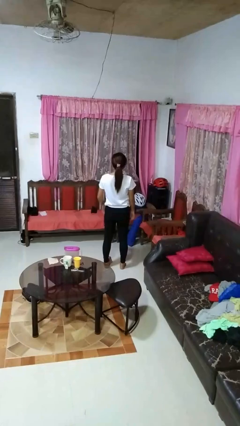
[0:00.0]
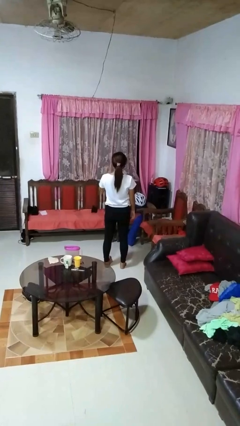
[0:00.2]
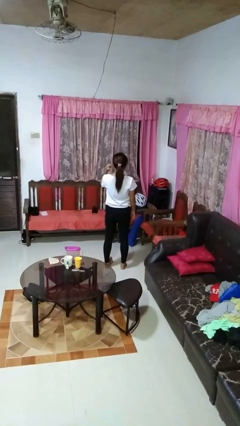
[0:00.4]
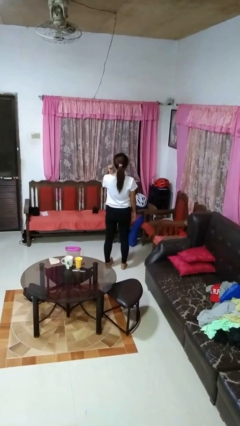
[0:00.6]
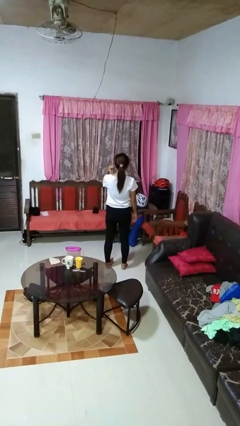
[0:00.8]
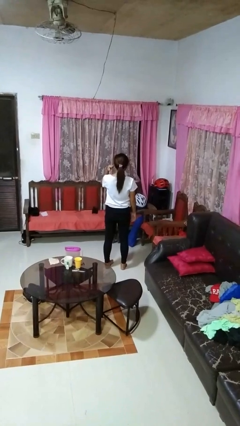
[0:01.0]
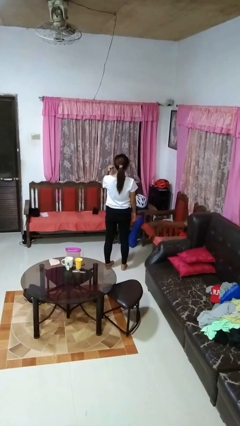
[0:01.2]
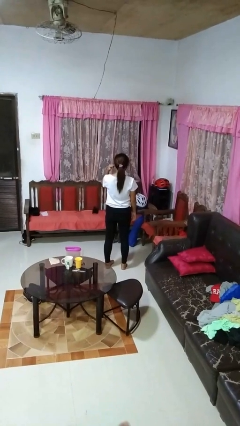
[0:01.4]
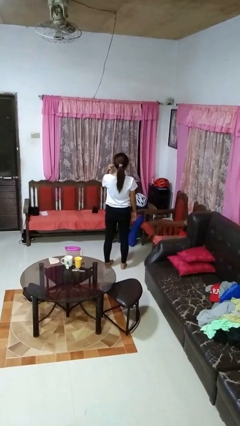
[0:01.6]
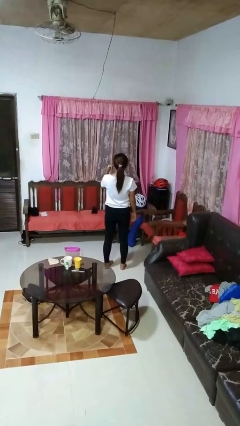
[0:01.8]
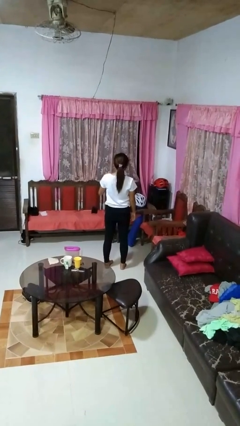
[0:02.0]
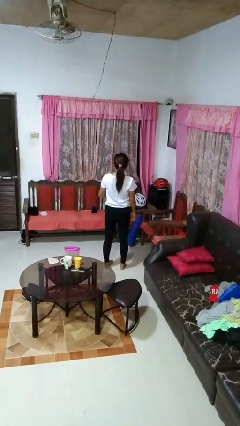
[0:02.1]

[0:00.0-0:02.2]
person gestures behind me

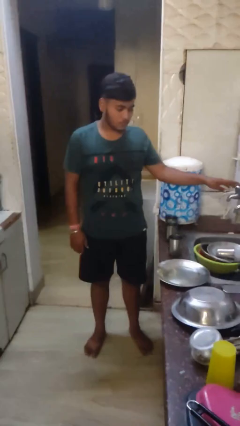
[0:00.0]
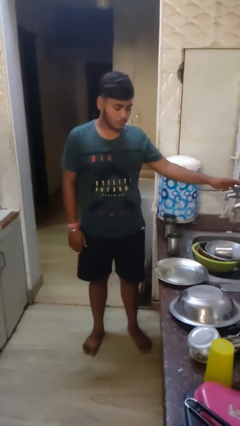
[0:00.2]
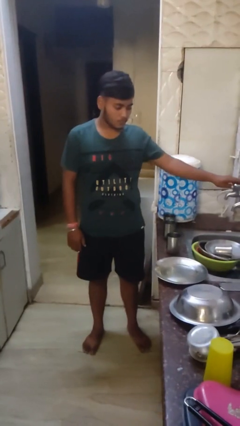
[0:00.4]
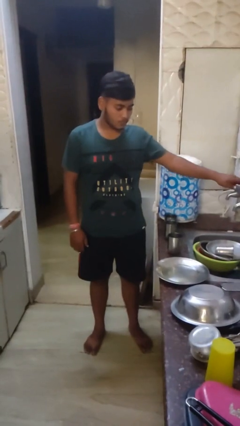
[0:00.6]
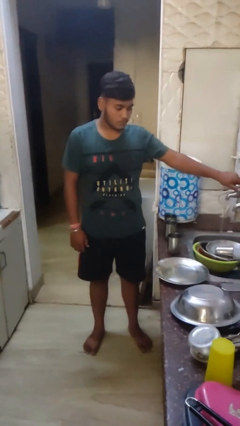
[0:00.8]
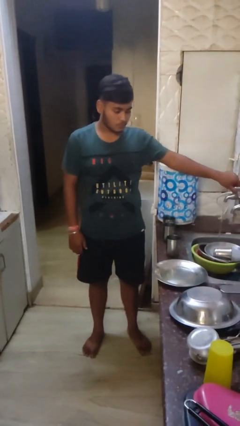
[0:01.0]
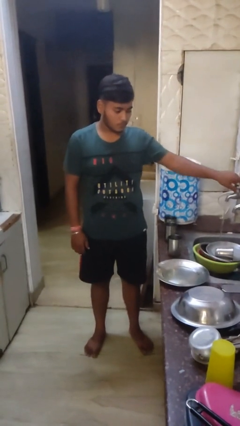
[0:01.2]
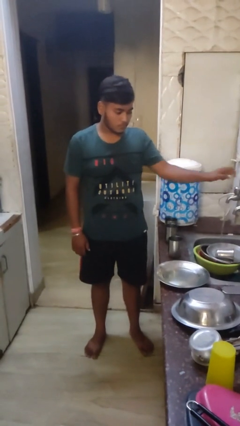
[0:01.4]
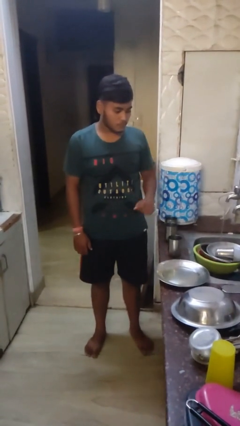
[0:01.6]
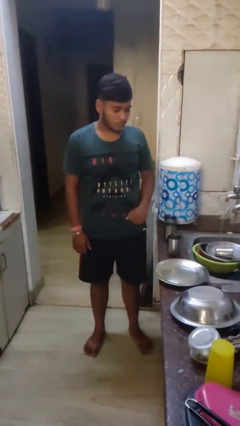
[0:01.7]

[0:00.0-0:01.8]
person turns on faucet

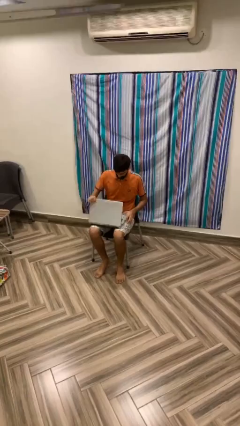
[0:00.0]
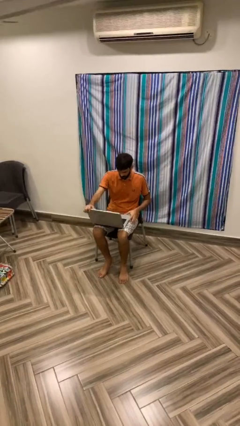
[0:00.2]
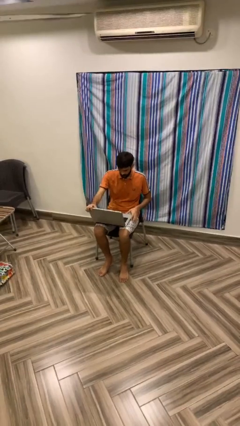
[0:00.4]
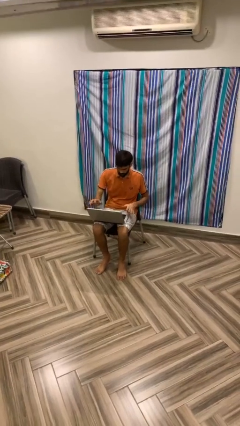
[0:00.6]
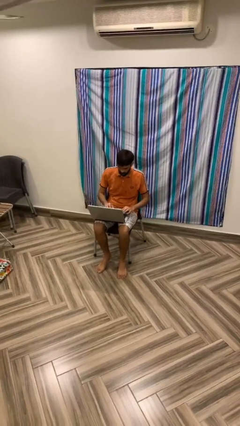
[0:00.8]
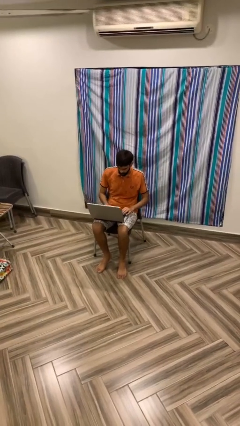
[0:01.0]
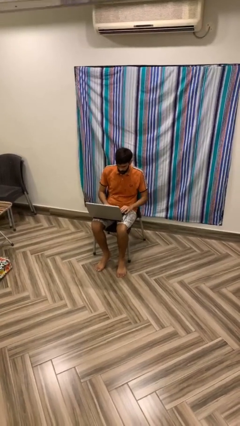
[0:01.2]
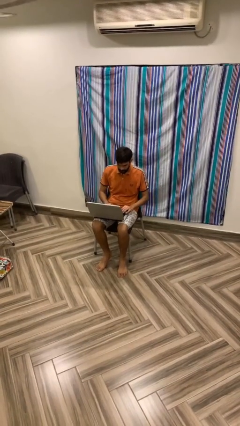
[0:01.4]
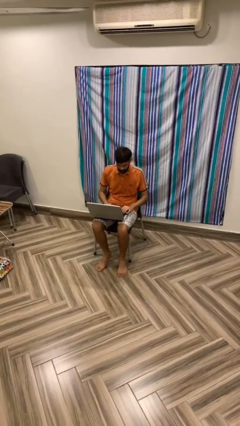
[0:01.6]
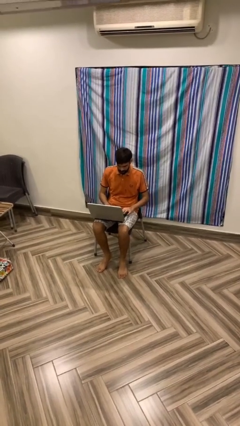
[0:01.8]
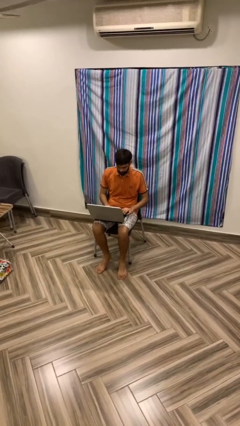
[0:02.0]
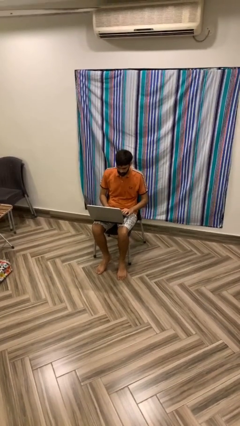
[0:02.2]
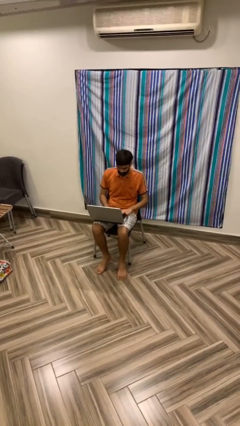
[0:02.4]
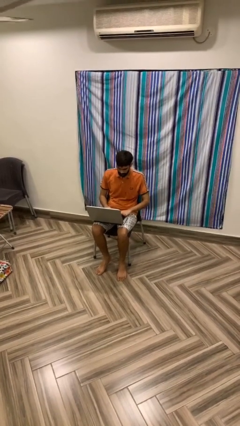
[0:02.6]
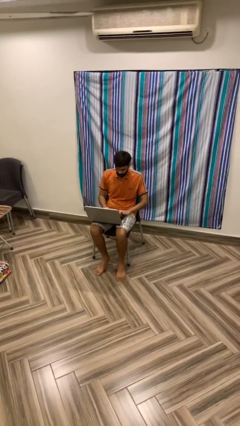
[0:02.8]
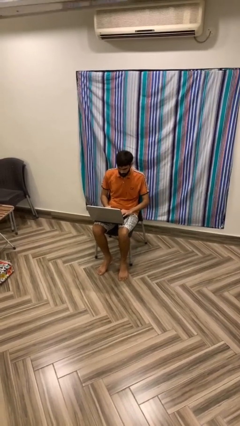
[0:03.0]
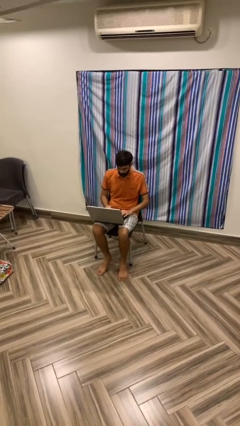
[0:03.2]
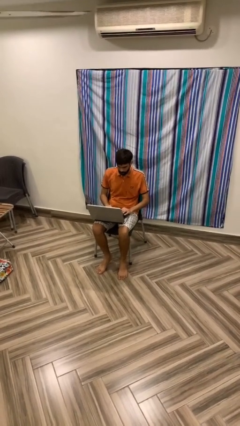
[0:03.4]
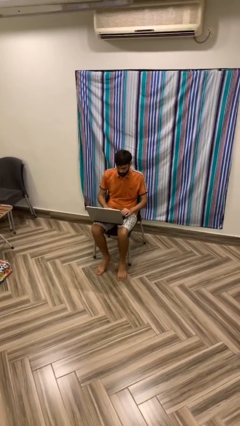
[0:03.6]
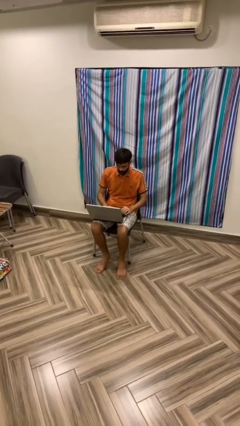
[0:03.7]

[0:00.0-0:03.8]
person interacts with laptop

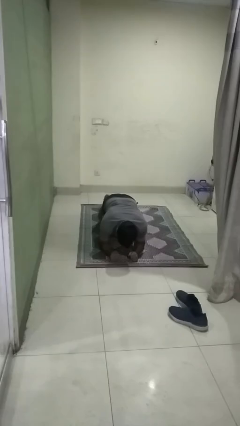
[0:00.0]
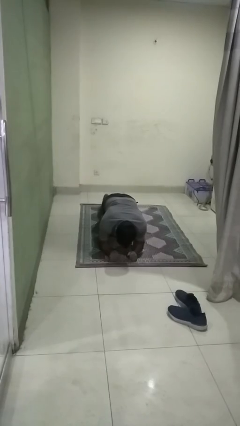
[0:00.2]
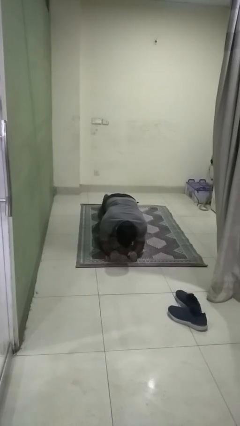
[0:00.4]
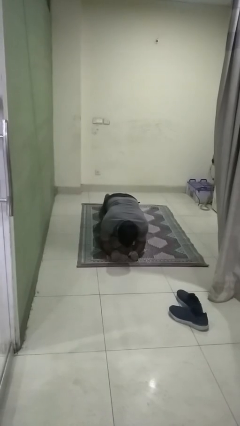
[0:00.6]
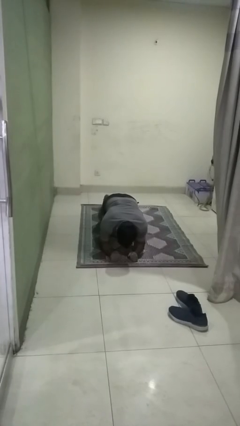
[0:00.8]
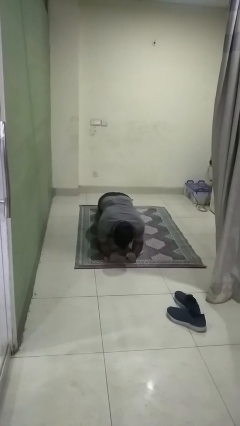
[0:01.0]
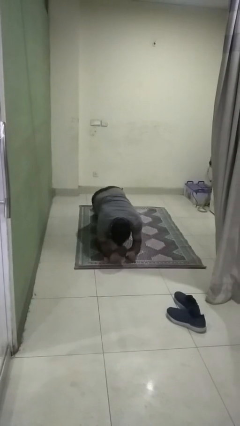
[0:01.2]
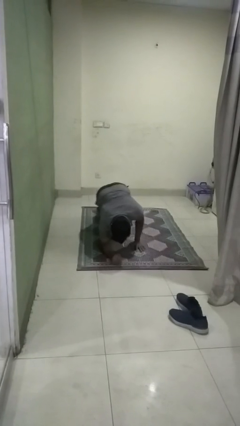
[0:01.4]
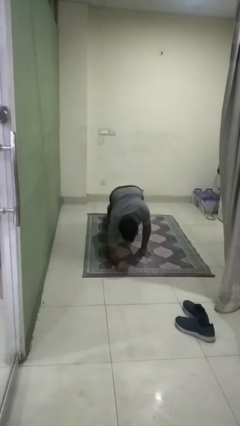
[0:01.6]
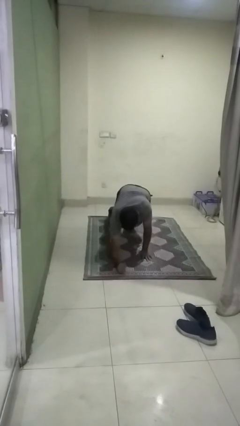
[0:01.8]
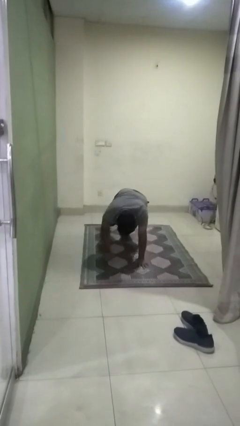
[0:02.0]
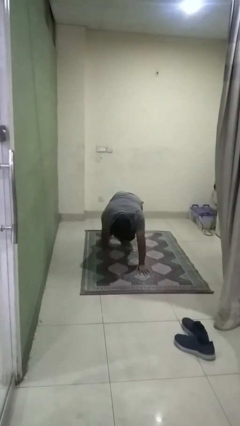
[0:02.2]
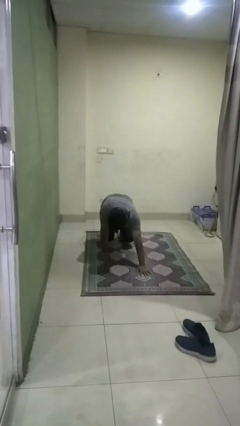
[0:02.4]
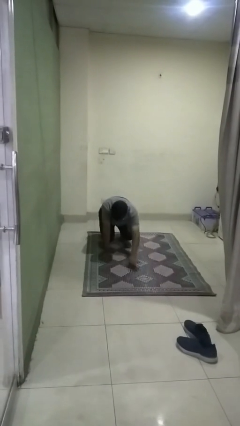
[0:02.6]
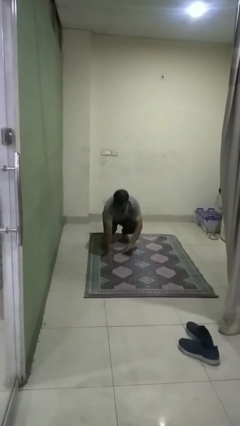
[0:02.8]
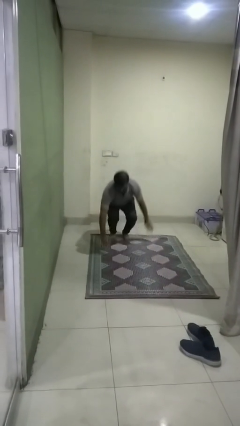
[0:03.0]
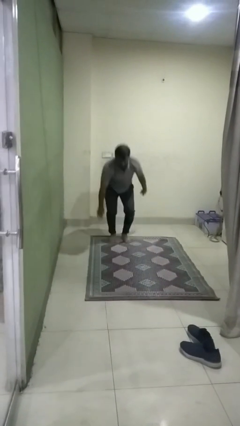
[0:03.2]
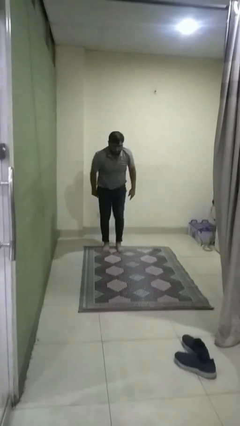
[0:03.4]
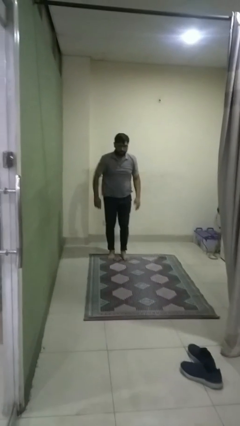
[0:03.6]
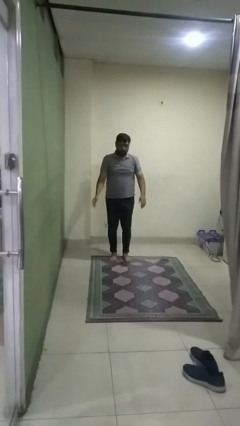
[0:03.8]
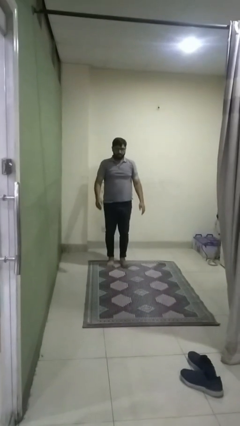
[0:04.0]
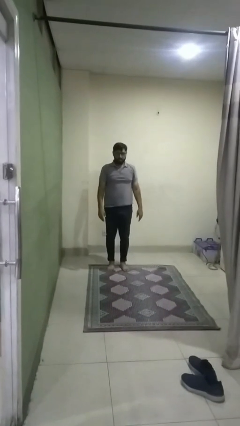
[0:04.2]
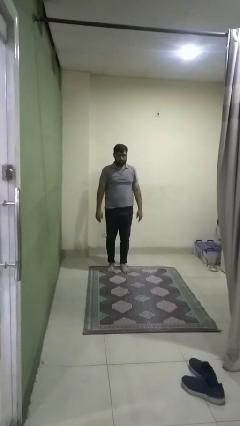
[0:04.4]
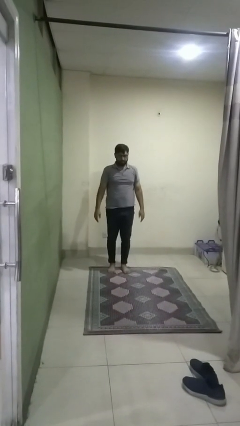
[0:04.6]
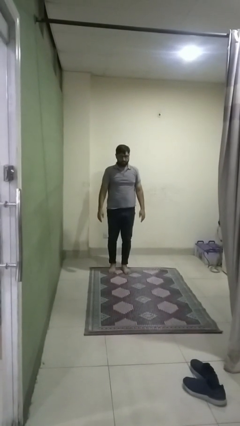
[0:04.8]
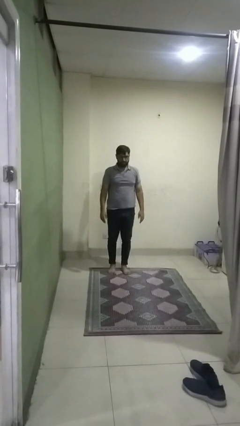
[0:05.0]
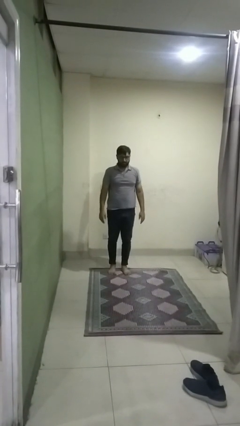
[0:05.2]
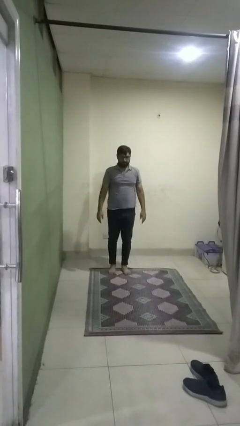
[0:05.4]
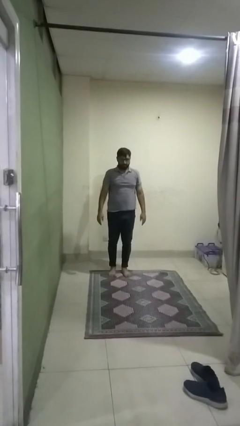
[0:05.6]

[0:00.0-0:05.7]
person stands up from floor

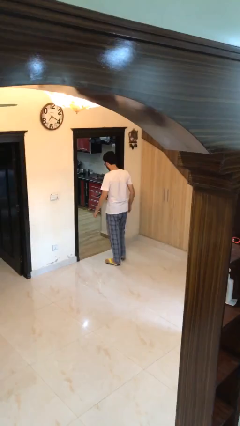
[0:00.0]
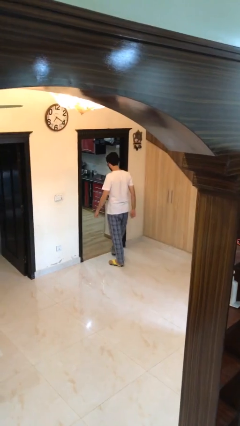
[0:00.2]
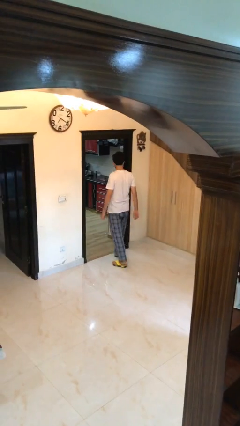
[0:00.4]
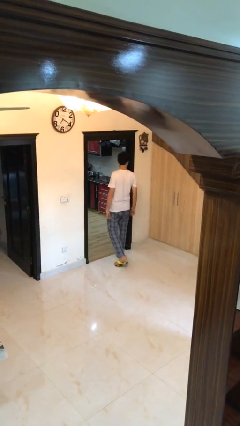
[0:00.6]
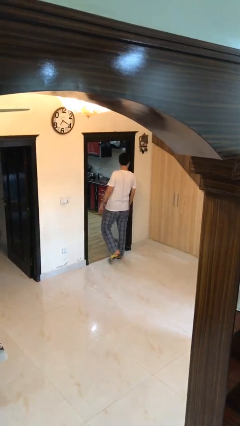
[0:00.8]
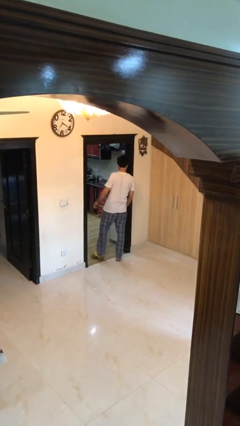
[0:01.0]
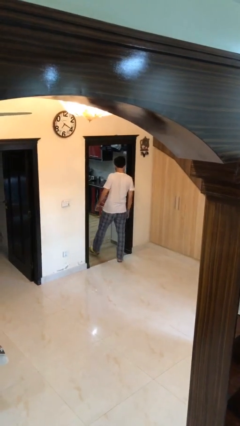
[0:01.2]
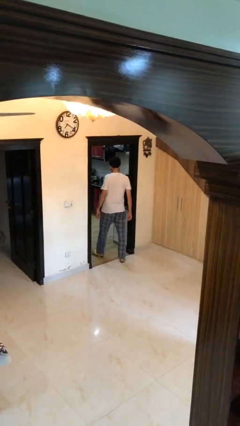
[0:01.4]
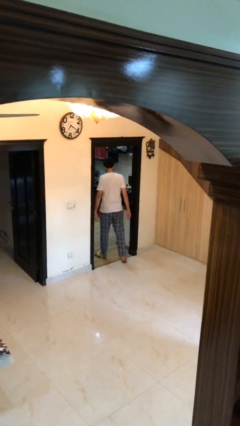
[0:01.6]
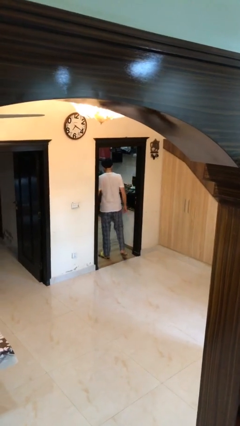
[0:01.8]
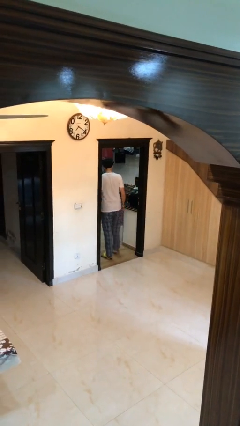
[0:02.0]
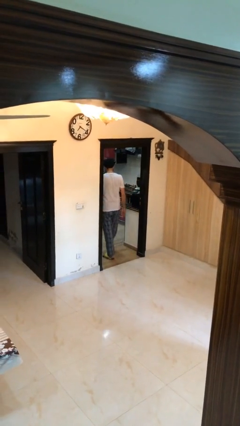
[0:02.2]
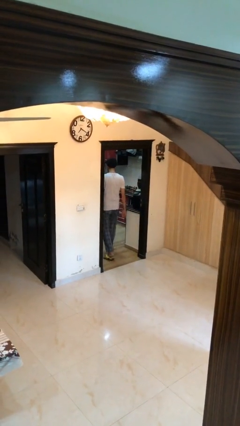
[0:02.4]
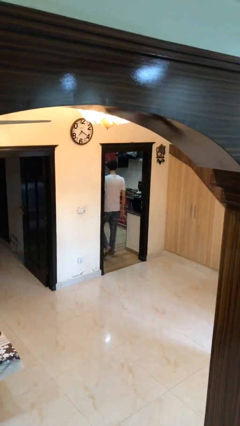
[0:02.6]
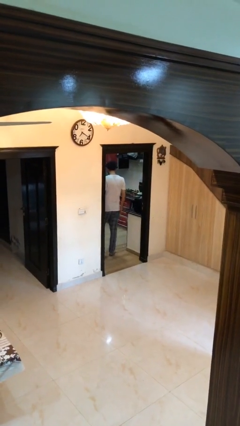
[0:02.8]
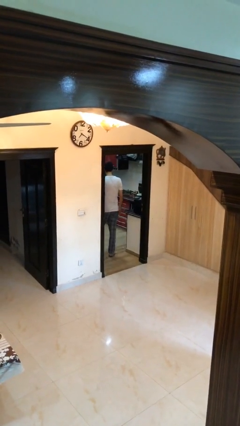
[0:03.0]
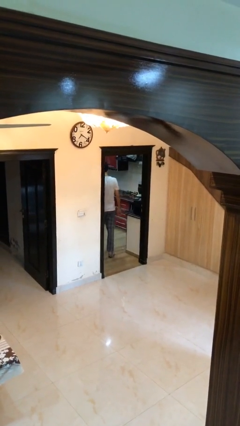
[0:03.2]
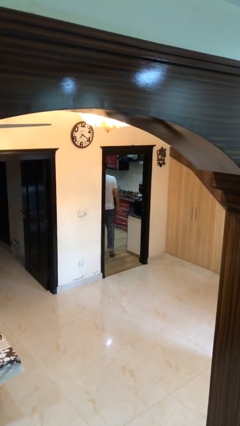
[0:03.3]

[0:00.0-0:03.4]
person exits scene through structure

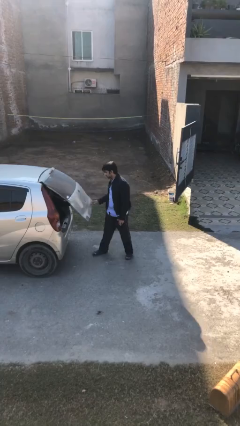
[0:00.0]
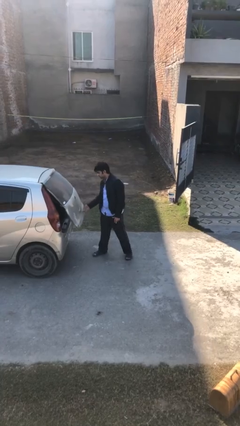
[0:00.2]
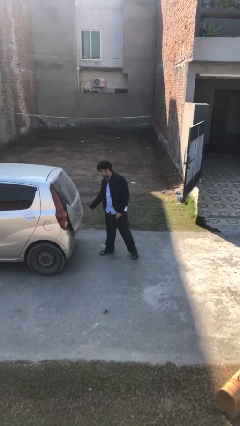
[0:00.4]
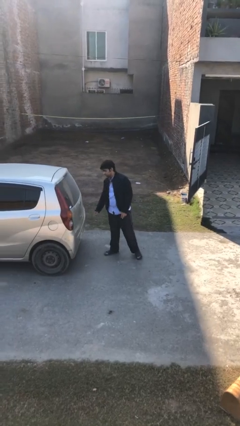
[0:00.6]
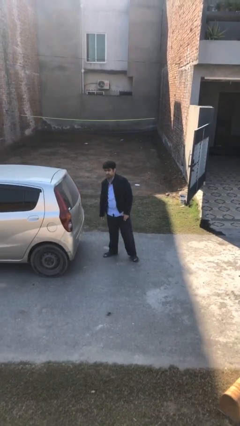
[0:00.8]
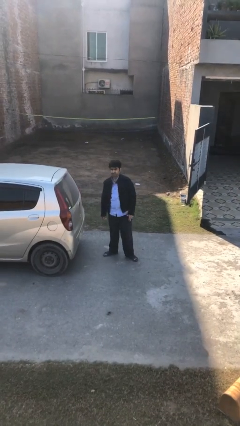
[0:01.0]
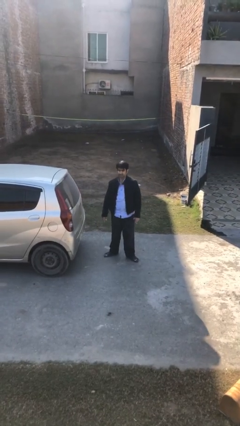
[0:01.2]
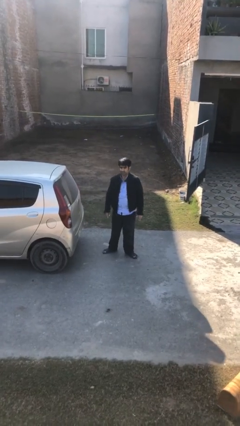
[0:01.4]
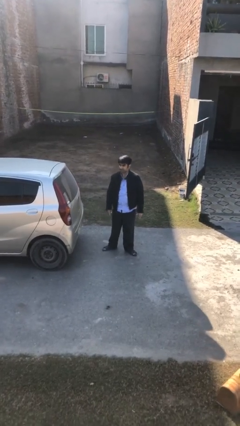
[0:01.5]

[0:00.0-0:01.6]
person closes car trunk
